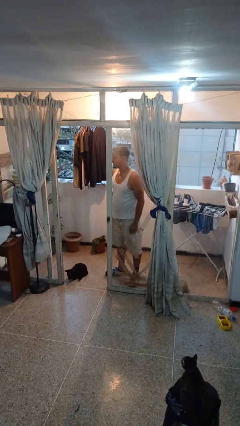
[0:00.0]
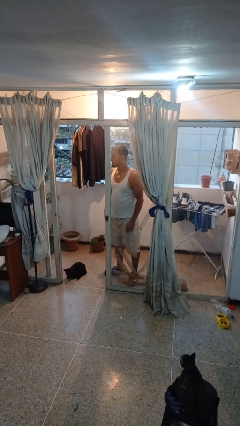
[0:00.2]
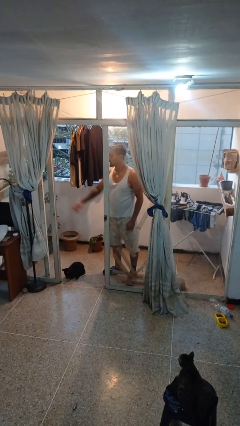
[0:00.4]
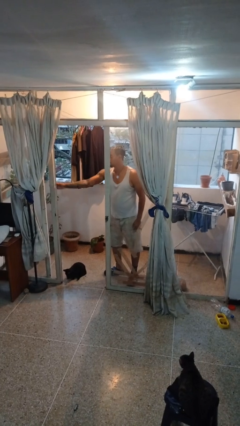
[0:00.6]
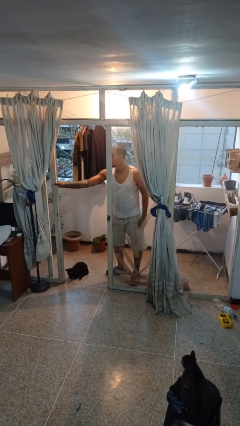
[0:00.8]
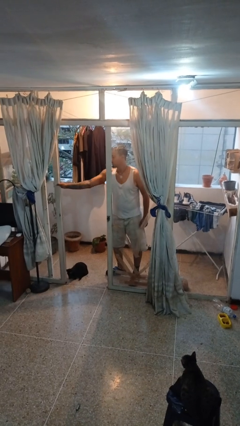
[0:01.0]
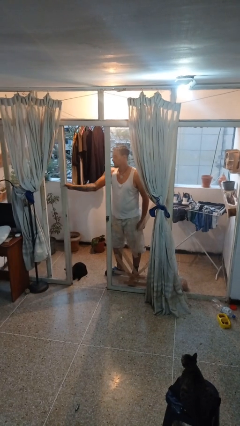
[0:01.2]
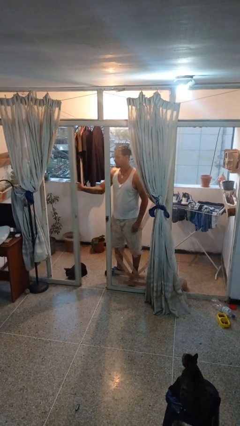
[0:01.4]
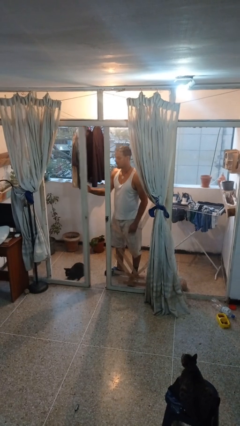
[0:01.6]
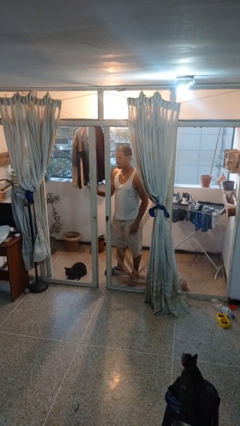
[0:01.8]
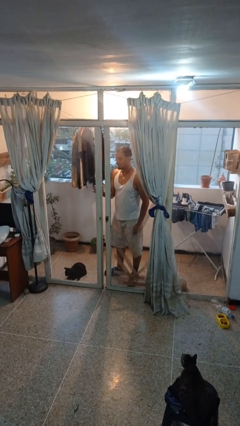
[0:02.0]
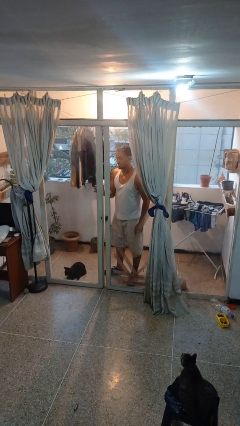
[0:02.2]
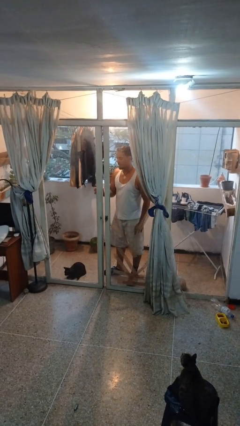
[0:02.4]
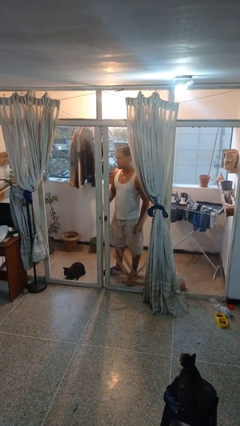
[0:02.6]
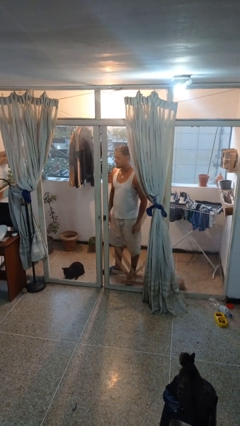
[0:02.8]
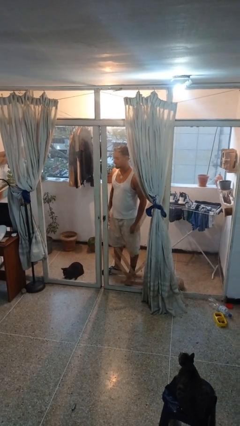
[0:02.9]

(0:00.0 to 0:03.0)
person closes sliding door

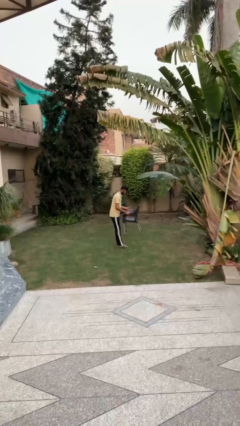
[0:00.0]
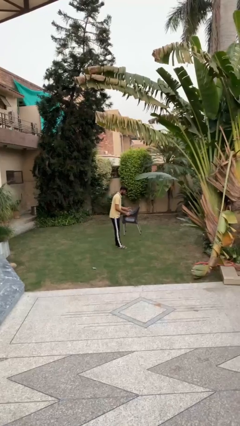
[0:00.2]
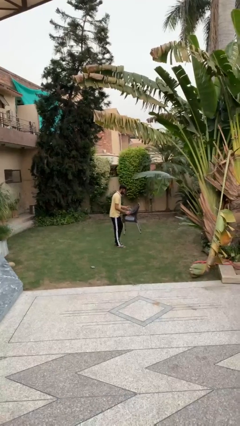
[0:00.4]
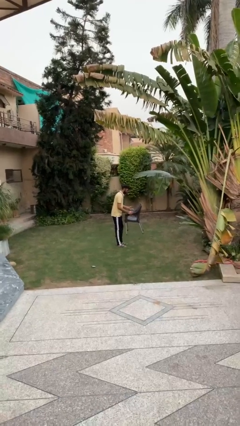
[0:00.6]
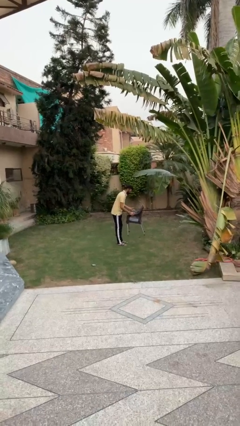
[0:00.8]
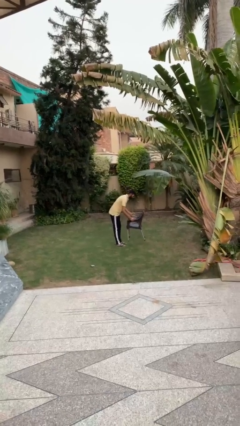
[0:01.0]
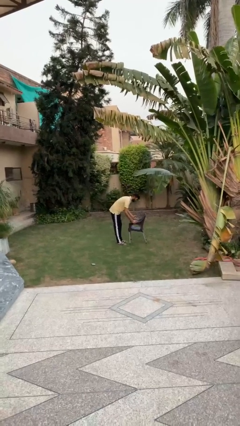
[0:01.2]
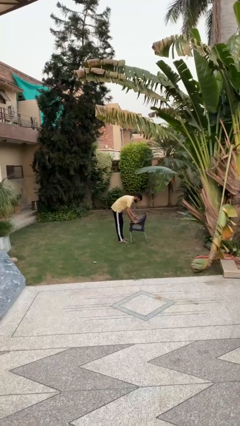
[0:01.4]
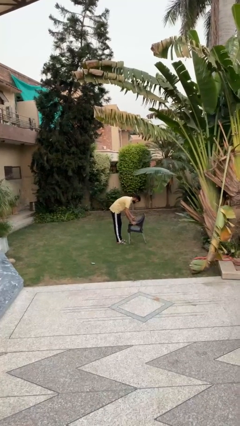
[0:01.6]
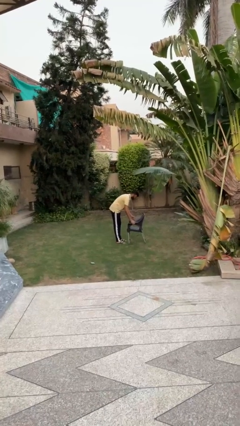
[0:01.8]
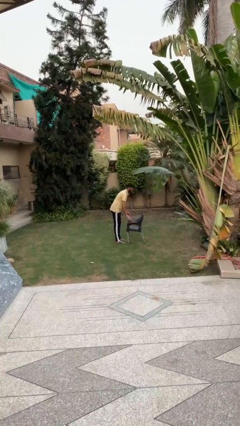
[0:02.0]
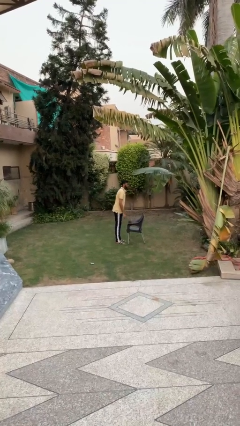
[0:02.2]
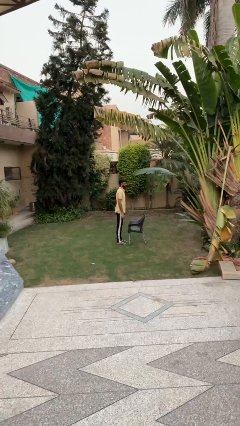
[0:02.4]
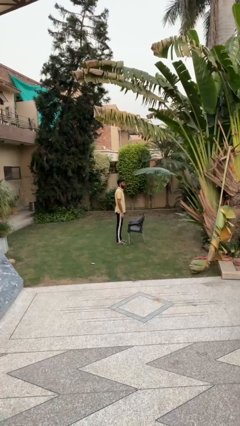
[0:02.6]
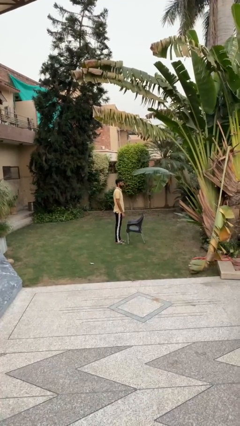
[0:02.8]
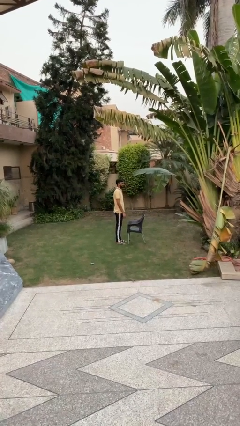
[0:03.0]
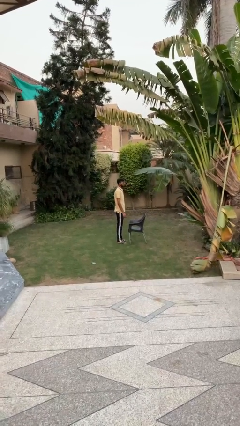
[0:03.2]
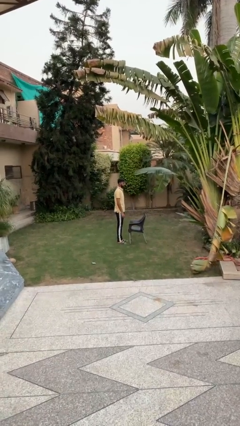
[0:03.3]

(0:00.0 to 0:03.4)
person puts down object on floor

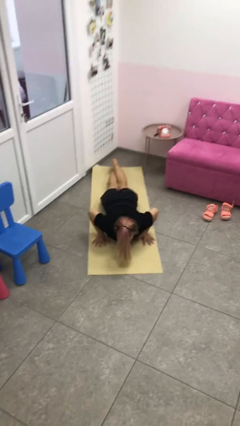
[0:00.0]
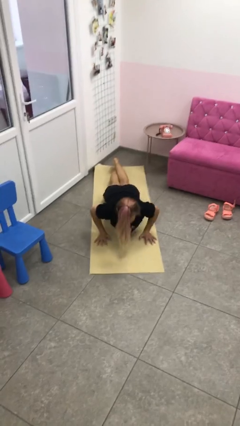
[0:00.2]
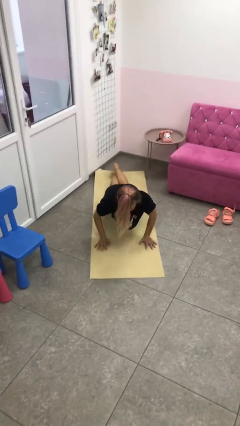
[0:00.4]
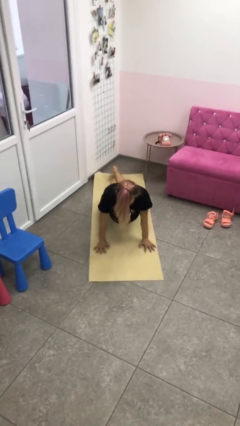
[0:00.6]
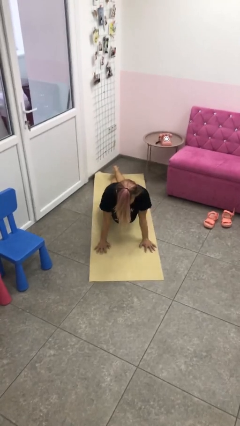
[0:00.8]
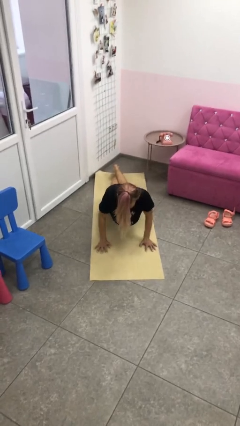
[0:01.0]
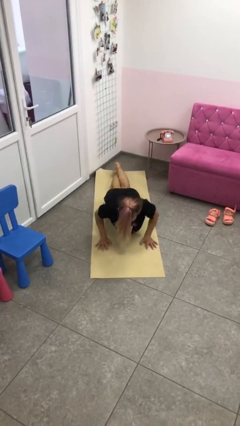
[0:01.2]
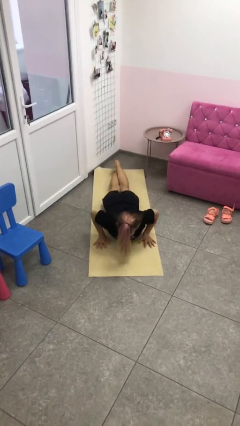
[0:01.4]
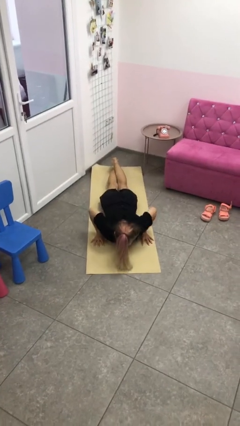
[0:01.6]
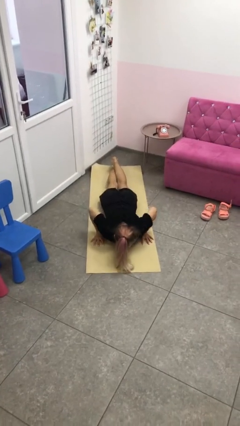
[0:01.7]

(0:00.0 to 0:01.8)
person exercises with pushup

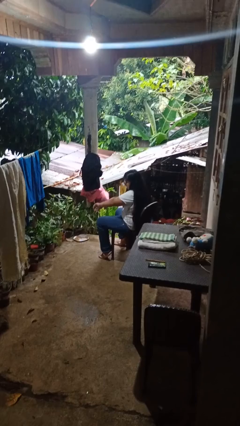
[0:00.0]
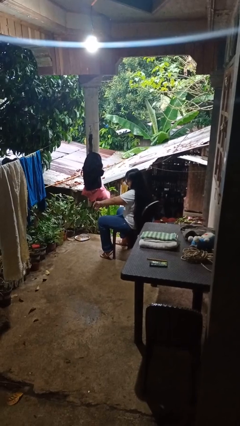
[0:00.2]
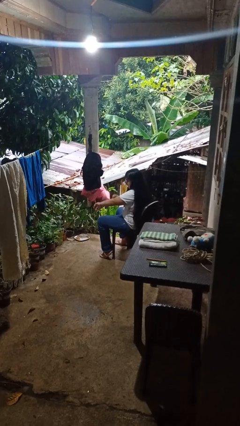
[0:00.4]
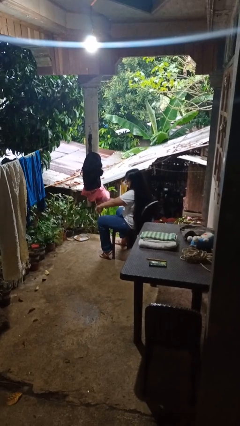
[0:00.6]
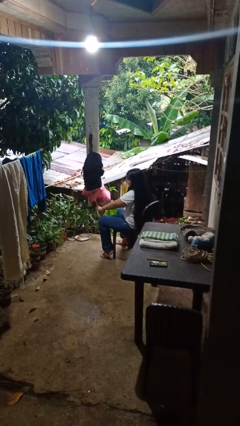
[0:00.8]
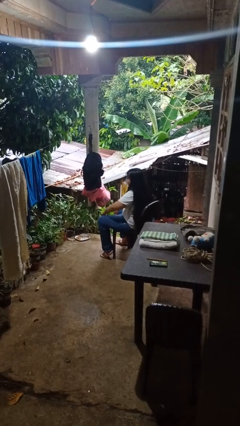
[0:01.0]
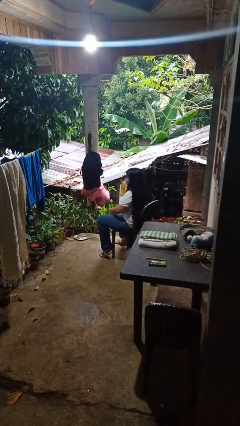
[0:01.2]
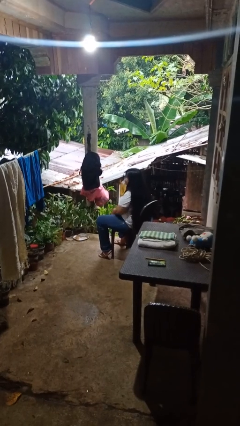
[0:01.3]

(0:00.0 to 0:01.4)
person swats bug

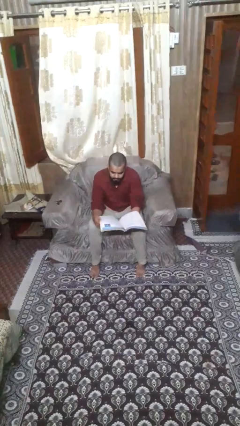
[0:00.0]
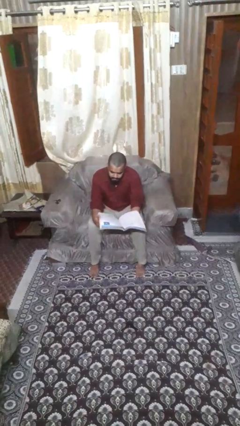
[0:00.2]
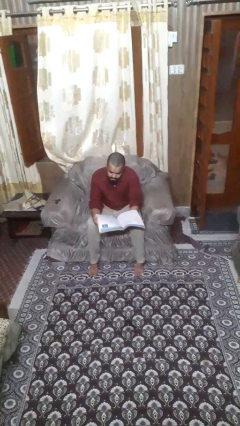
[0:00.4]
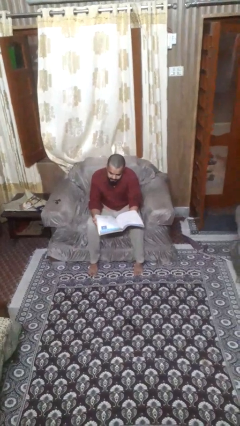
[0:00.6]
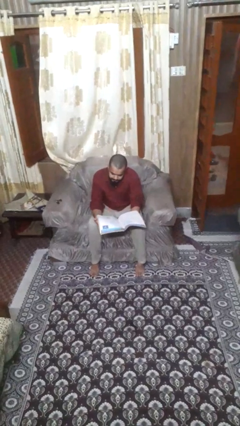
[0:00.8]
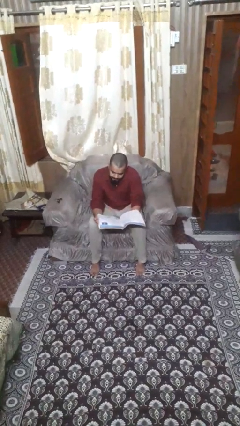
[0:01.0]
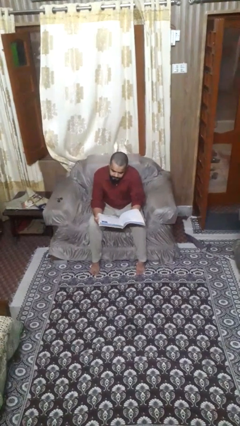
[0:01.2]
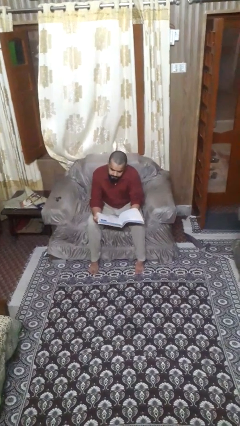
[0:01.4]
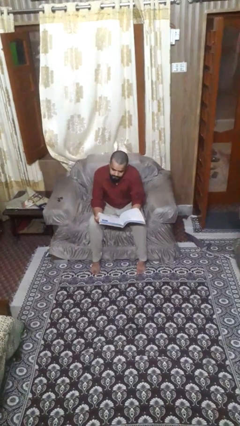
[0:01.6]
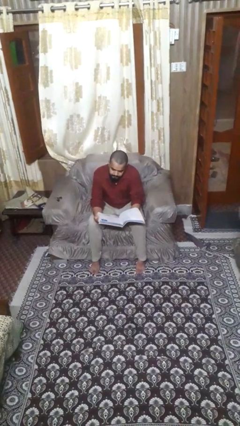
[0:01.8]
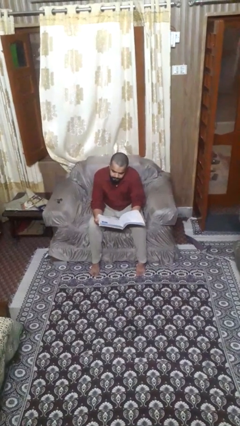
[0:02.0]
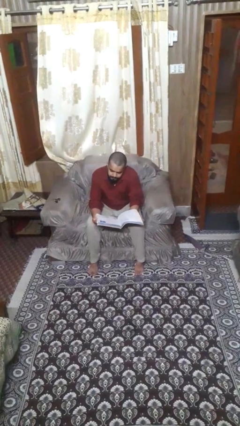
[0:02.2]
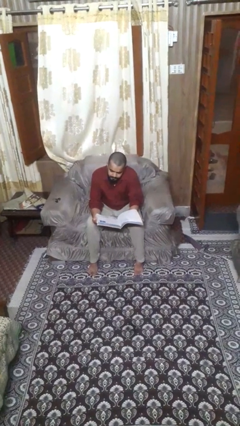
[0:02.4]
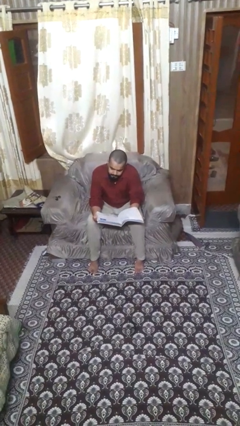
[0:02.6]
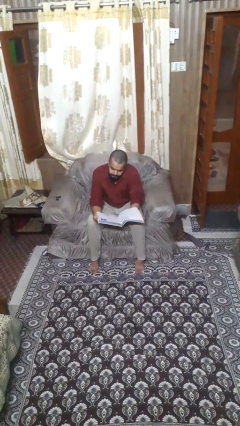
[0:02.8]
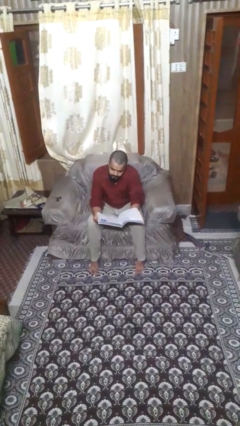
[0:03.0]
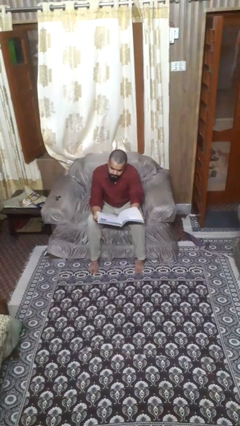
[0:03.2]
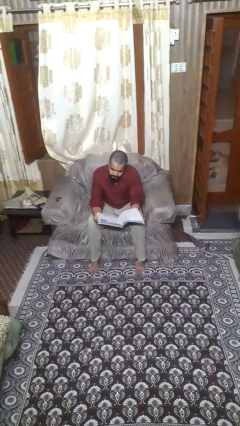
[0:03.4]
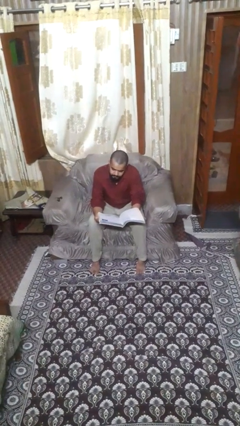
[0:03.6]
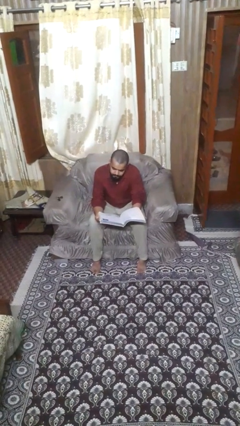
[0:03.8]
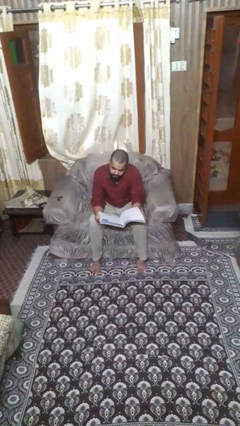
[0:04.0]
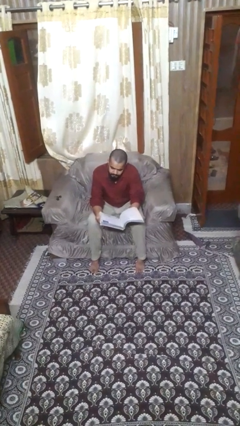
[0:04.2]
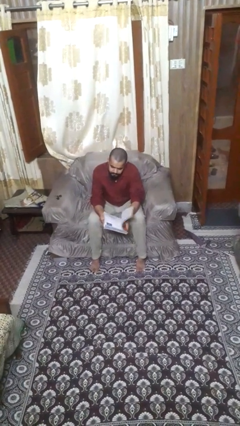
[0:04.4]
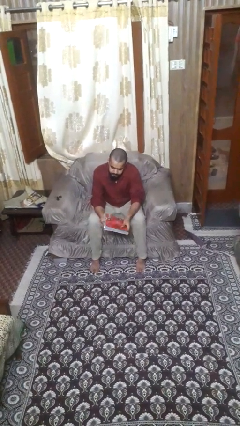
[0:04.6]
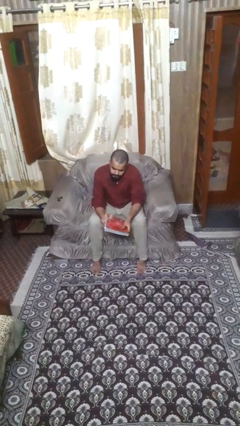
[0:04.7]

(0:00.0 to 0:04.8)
person reads book

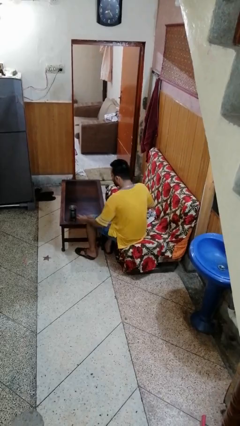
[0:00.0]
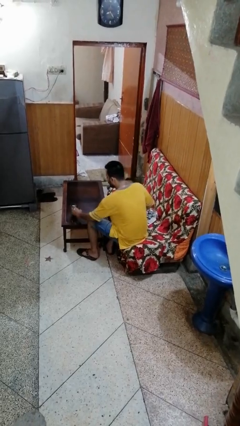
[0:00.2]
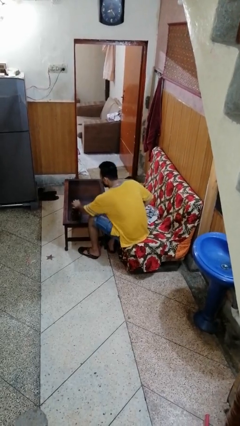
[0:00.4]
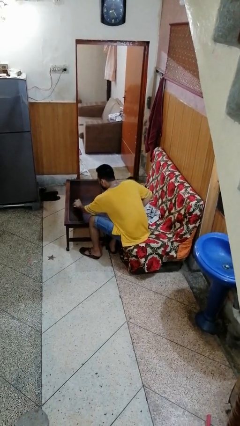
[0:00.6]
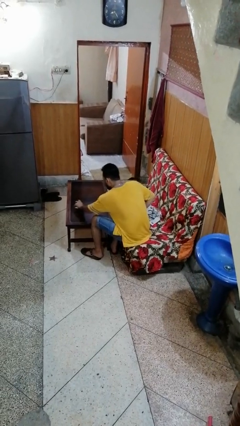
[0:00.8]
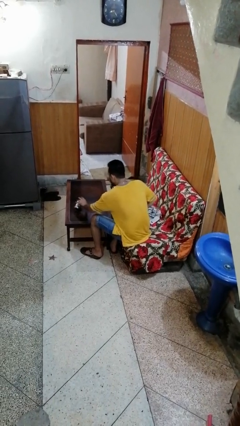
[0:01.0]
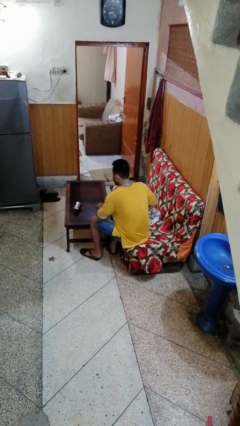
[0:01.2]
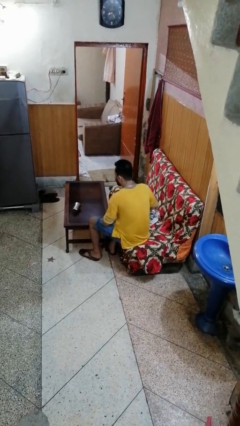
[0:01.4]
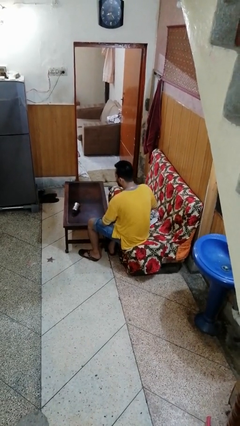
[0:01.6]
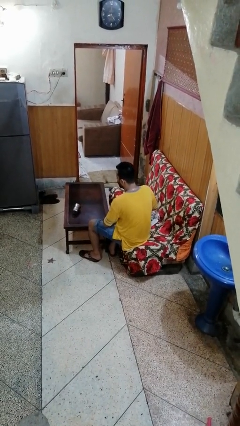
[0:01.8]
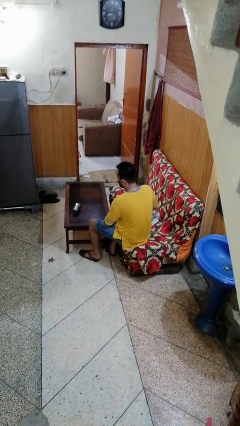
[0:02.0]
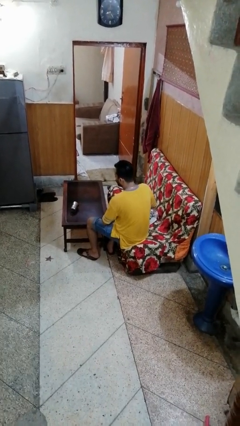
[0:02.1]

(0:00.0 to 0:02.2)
person knocks over glass

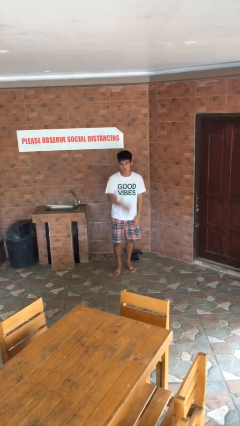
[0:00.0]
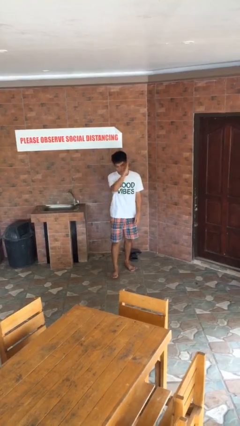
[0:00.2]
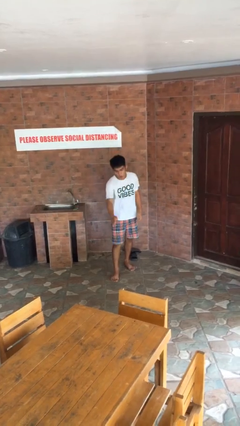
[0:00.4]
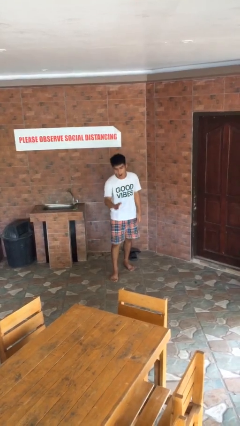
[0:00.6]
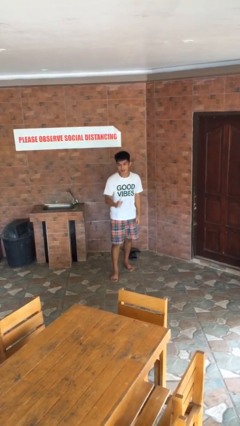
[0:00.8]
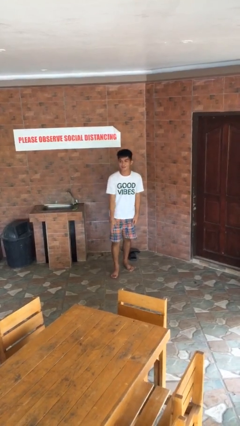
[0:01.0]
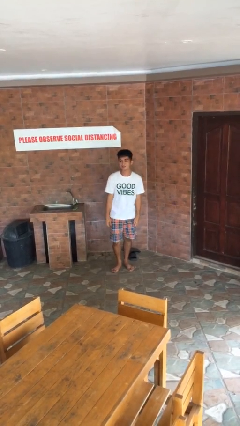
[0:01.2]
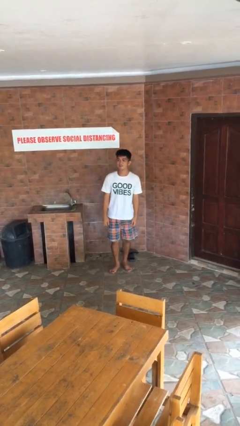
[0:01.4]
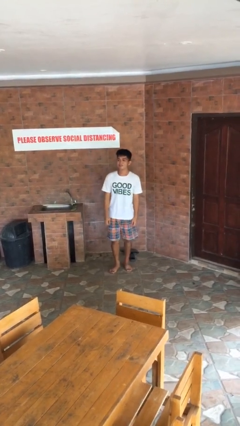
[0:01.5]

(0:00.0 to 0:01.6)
person karate chop
